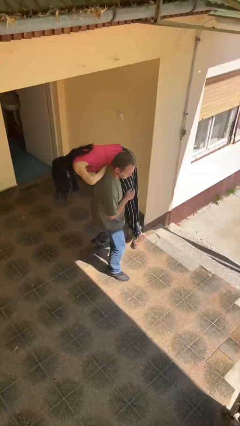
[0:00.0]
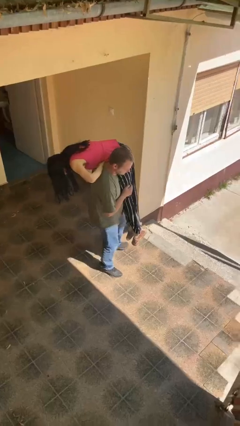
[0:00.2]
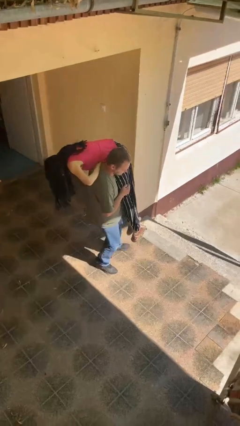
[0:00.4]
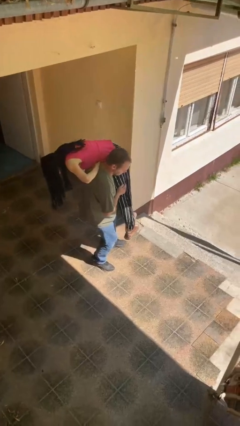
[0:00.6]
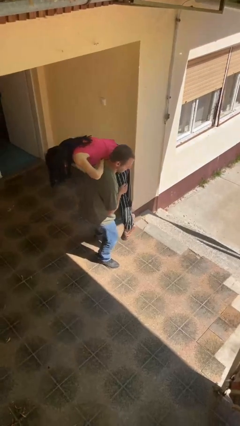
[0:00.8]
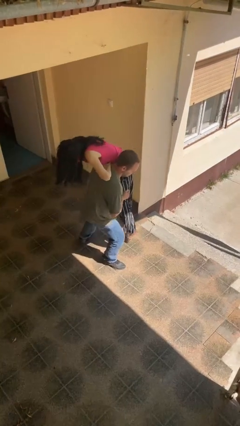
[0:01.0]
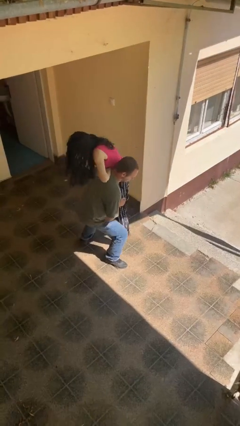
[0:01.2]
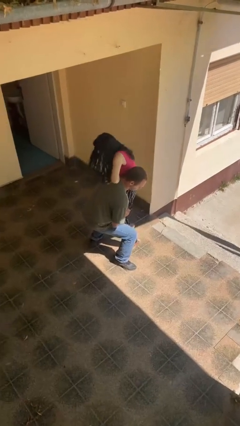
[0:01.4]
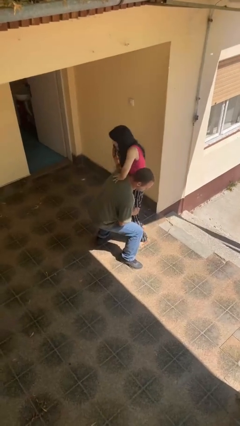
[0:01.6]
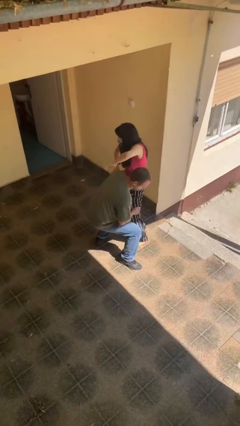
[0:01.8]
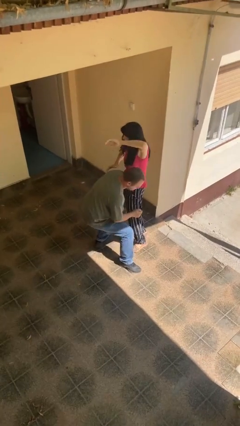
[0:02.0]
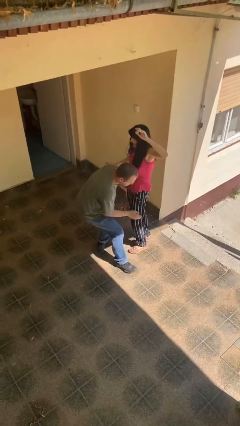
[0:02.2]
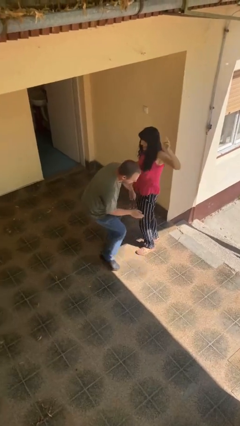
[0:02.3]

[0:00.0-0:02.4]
person puts down person

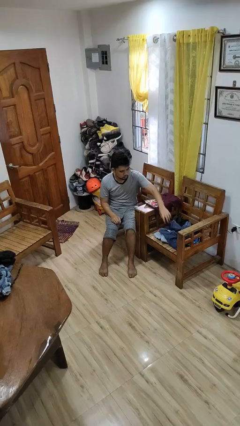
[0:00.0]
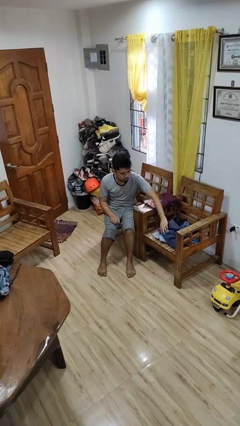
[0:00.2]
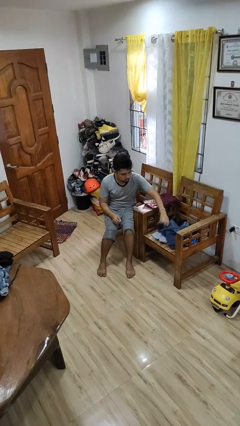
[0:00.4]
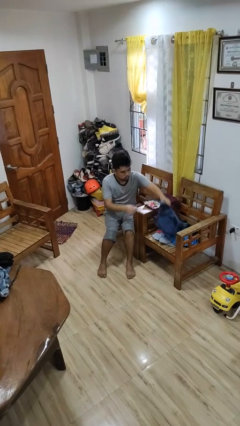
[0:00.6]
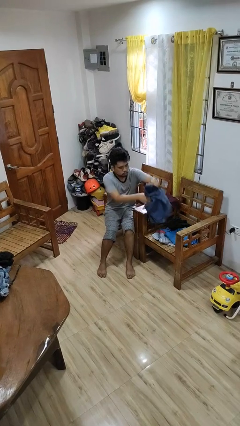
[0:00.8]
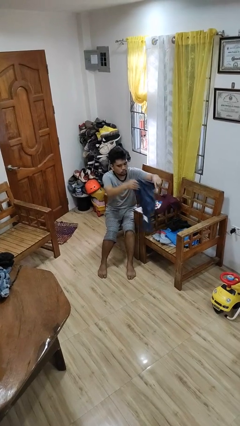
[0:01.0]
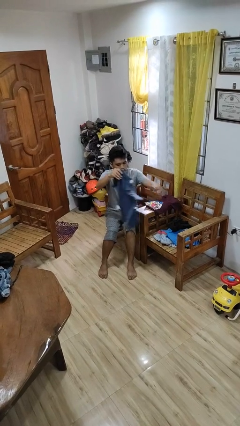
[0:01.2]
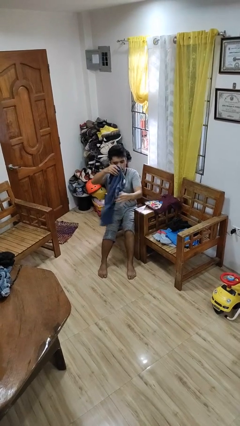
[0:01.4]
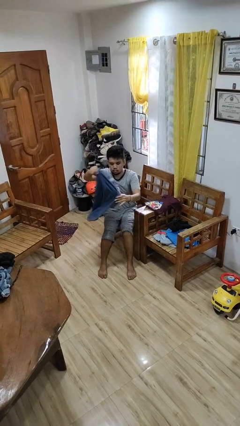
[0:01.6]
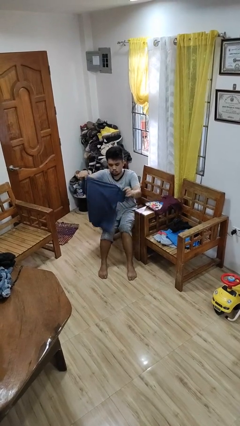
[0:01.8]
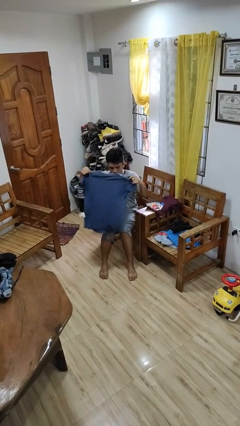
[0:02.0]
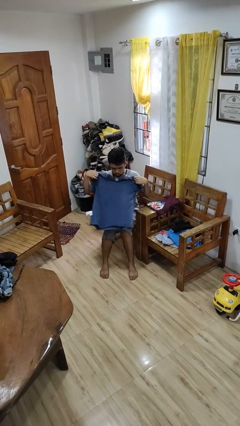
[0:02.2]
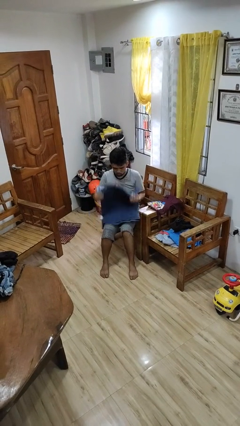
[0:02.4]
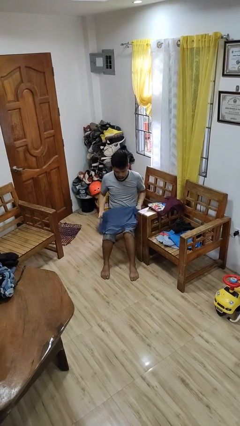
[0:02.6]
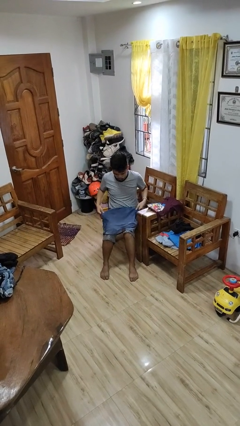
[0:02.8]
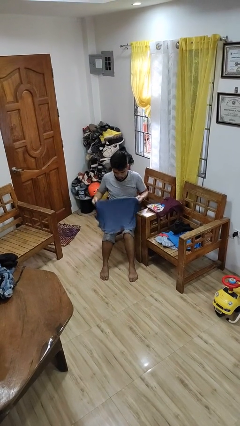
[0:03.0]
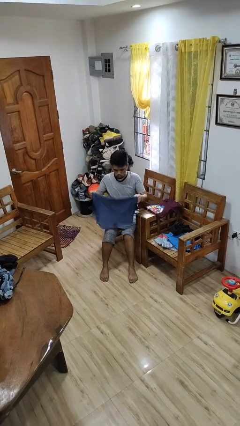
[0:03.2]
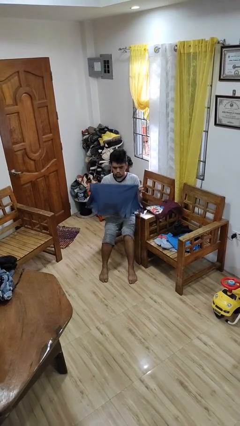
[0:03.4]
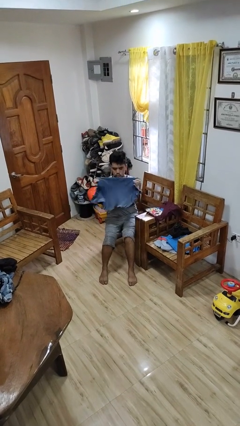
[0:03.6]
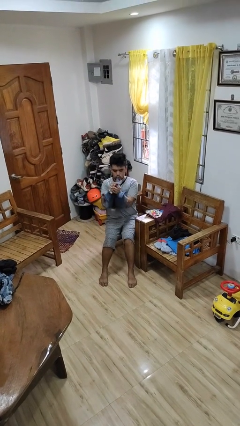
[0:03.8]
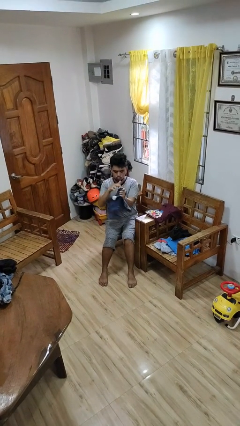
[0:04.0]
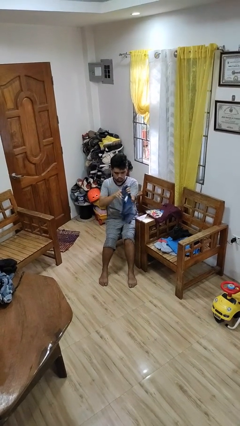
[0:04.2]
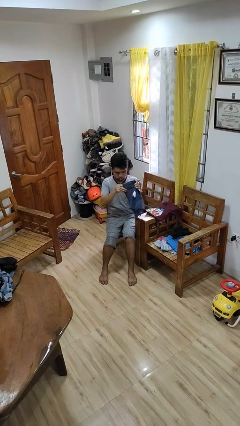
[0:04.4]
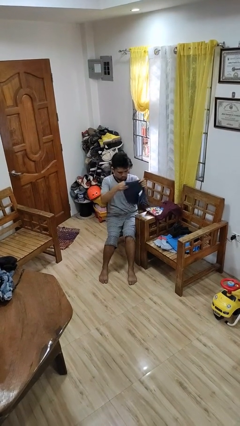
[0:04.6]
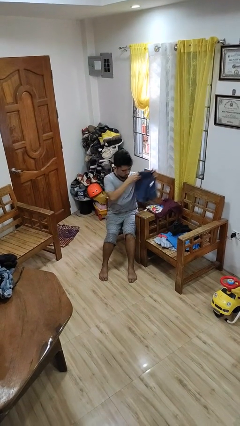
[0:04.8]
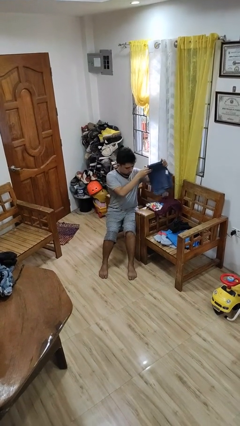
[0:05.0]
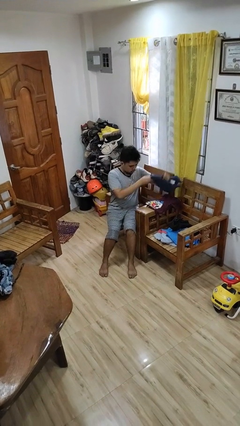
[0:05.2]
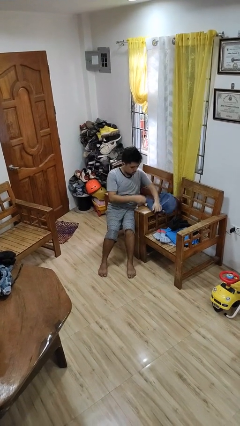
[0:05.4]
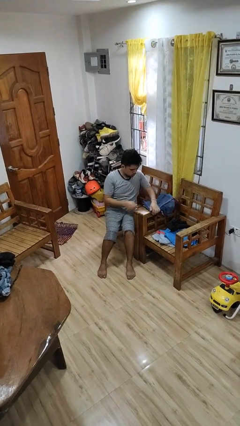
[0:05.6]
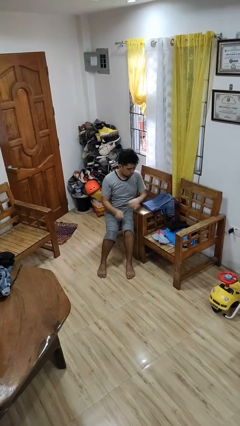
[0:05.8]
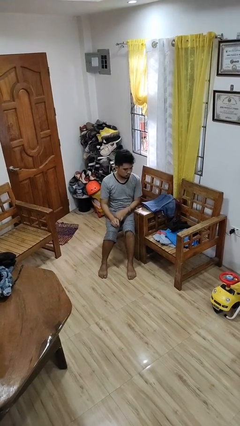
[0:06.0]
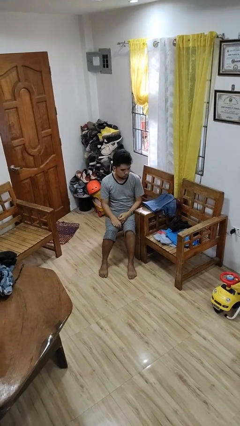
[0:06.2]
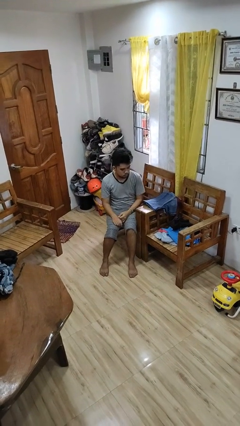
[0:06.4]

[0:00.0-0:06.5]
person folds shirt

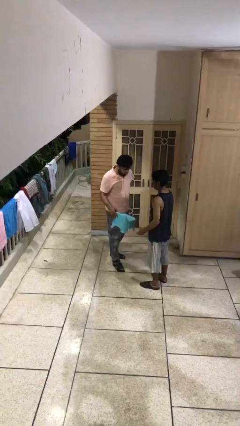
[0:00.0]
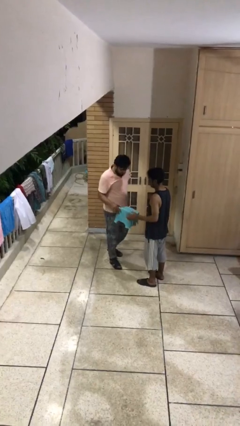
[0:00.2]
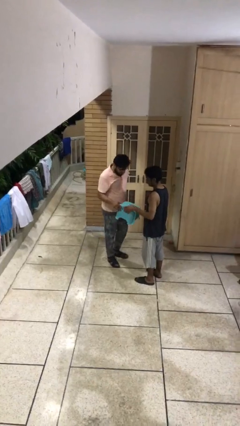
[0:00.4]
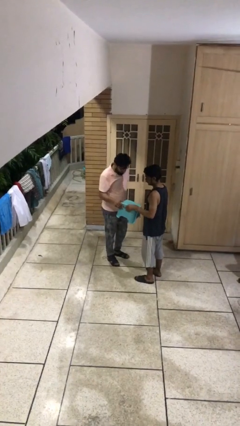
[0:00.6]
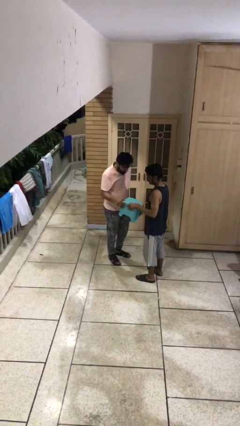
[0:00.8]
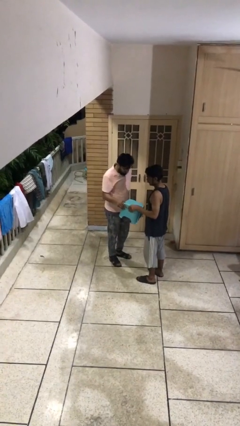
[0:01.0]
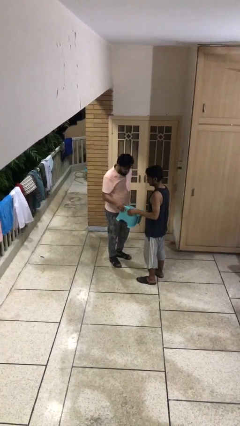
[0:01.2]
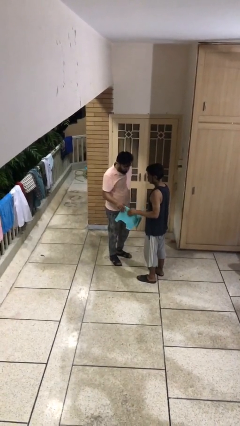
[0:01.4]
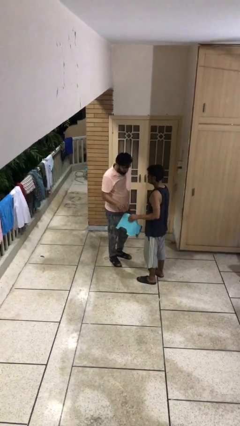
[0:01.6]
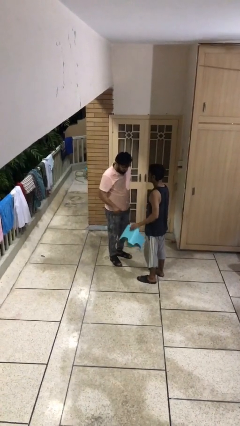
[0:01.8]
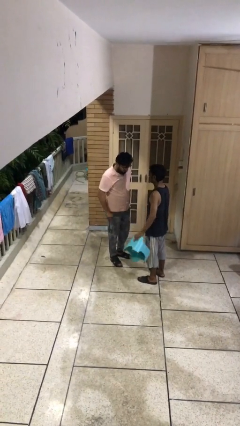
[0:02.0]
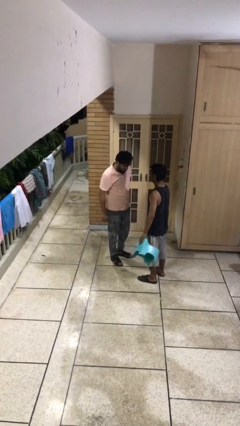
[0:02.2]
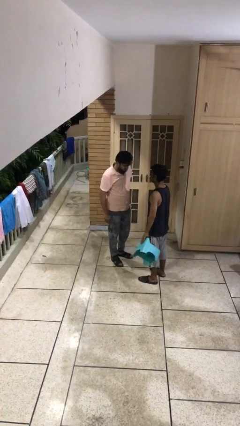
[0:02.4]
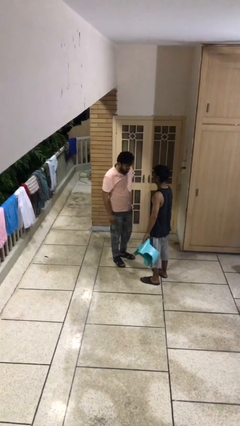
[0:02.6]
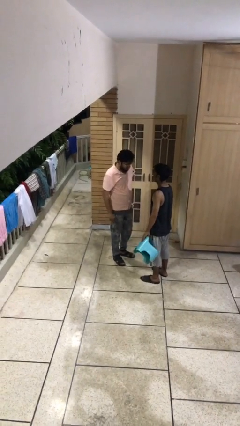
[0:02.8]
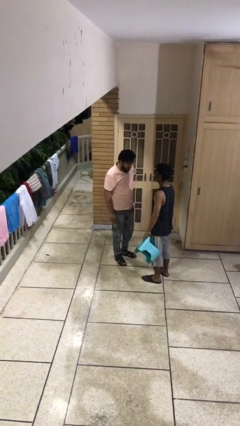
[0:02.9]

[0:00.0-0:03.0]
person transfers object to person

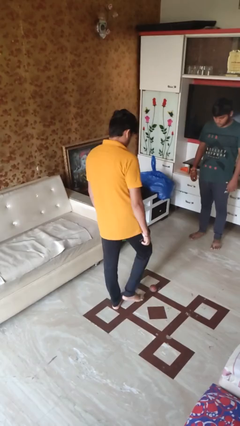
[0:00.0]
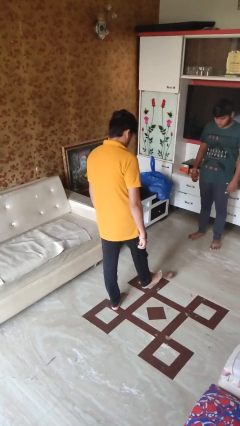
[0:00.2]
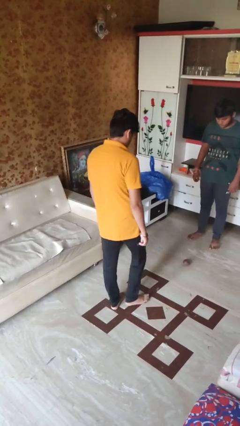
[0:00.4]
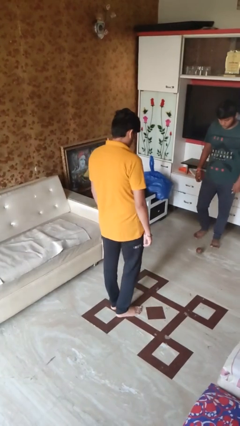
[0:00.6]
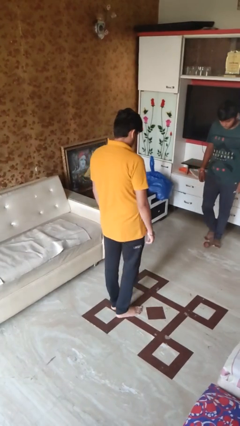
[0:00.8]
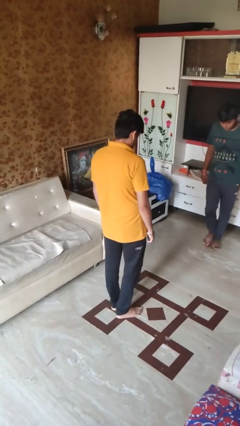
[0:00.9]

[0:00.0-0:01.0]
person kicks object to person

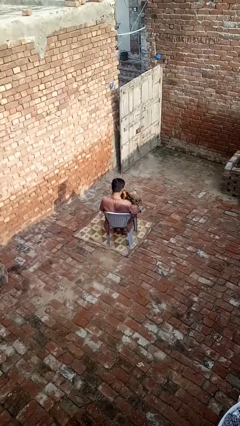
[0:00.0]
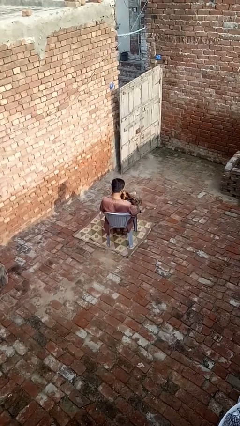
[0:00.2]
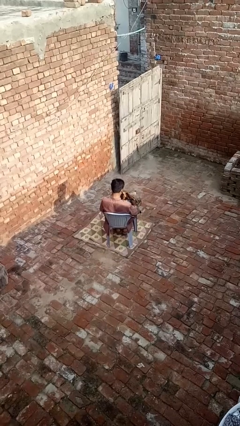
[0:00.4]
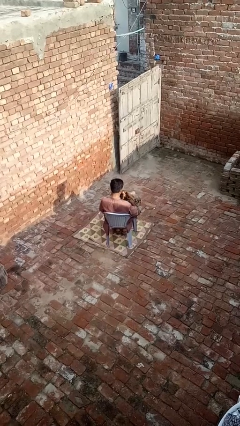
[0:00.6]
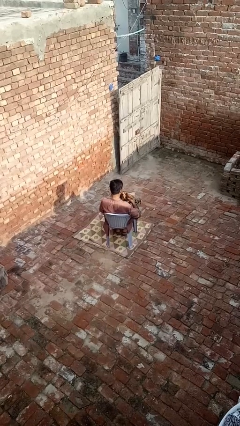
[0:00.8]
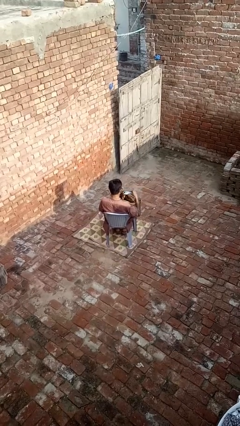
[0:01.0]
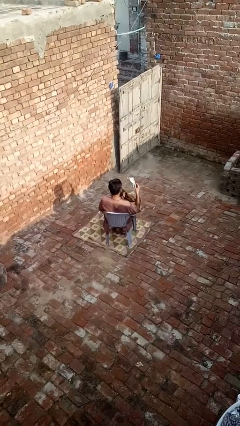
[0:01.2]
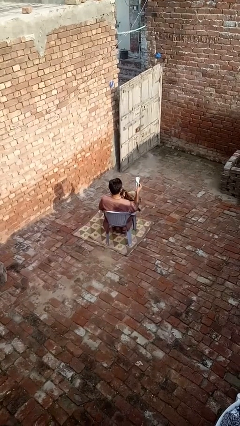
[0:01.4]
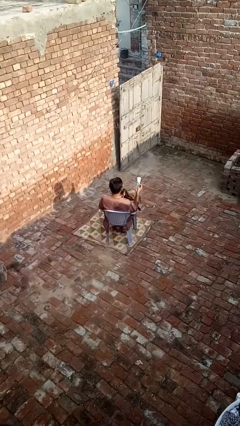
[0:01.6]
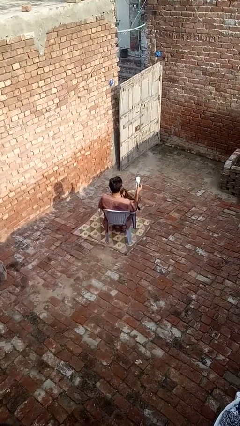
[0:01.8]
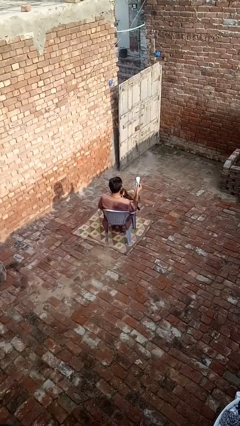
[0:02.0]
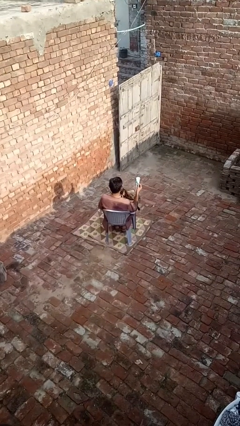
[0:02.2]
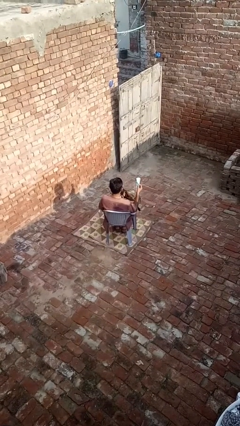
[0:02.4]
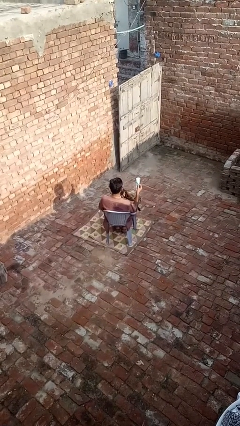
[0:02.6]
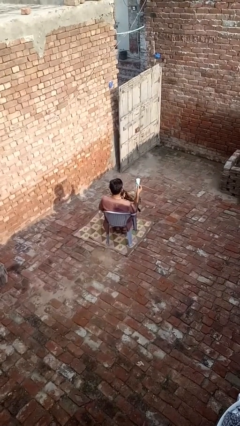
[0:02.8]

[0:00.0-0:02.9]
person takes object from purse

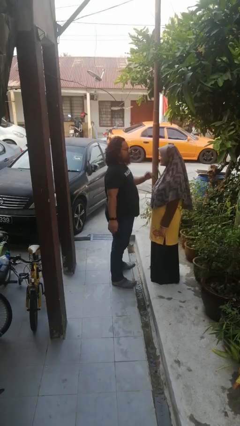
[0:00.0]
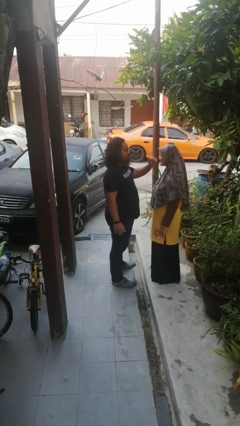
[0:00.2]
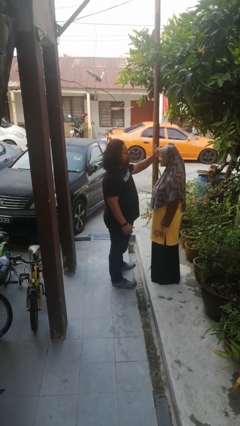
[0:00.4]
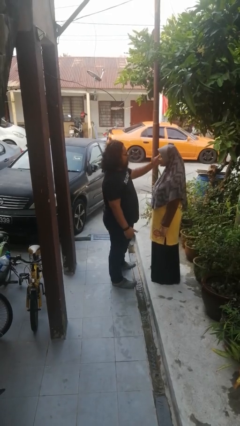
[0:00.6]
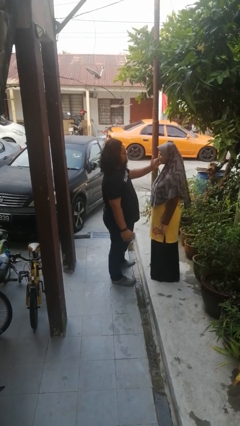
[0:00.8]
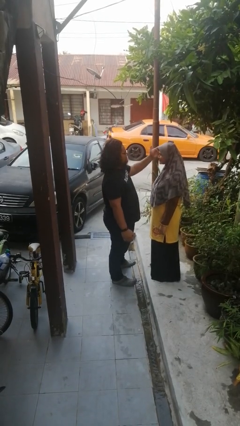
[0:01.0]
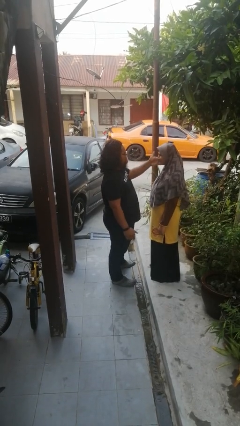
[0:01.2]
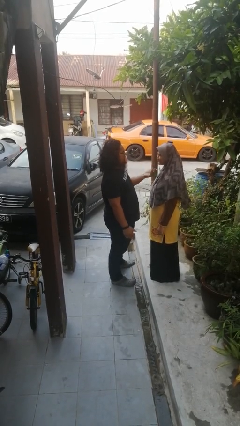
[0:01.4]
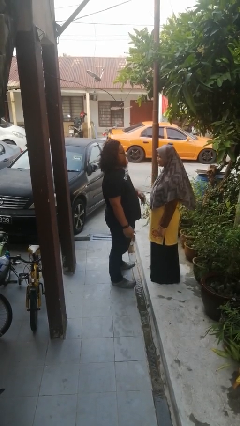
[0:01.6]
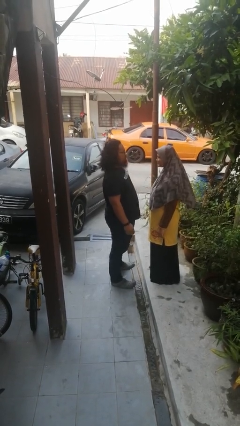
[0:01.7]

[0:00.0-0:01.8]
person touches face of person
